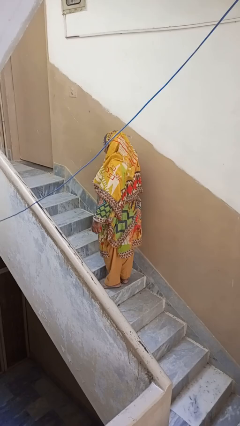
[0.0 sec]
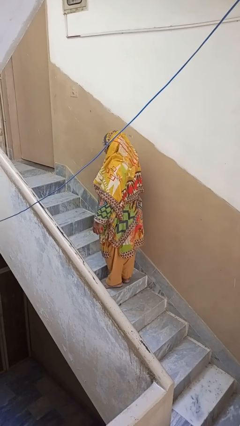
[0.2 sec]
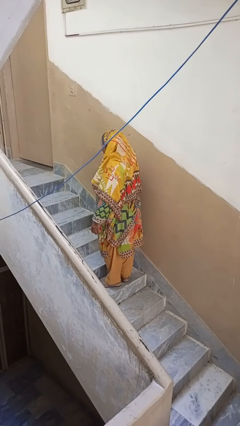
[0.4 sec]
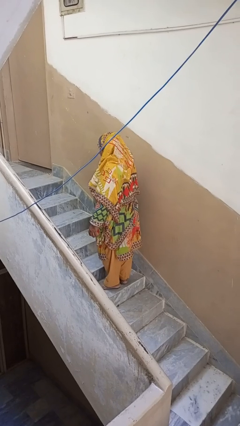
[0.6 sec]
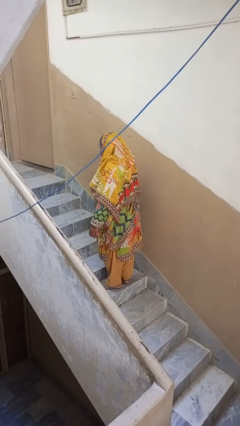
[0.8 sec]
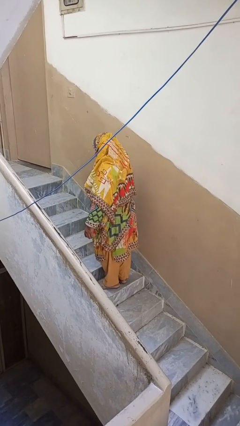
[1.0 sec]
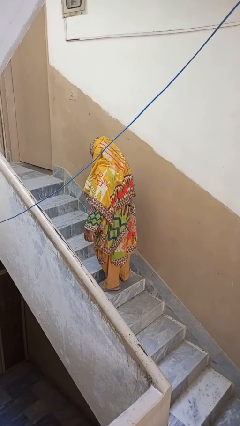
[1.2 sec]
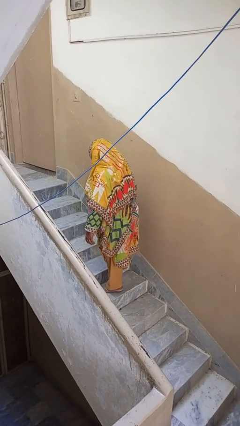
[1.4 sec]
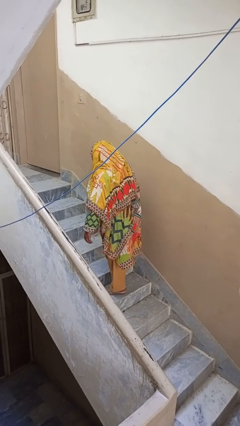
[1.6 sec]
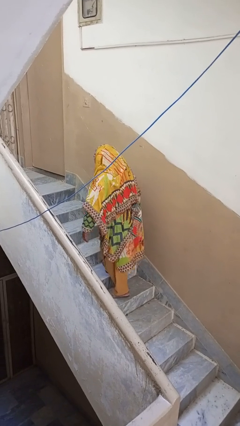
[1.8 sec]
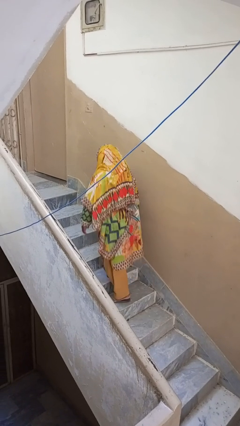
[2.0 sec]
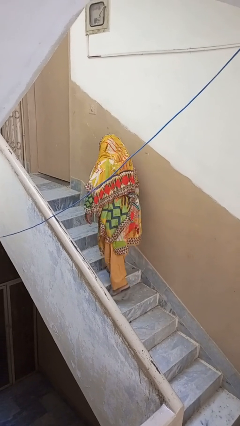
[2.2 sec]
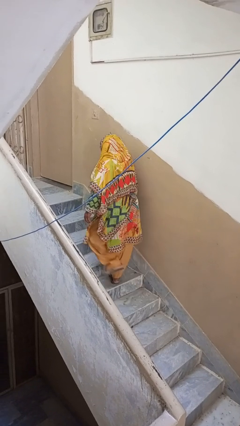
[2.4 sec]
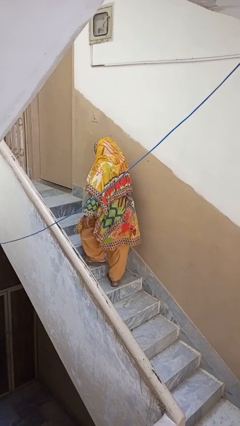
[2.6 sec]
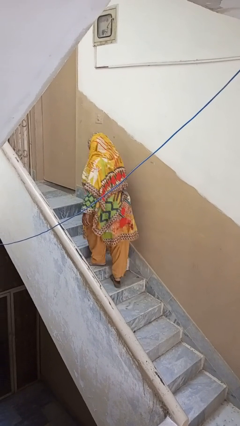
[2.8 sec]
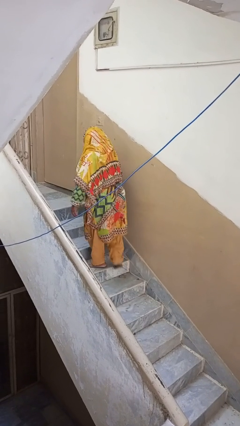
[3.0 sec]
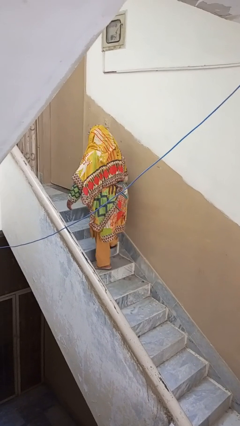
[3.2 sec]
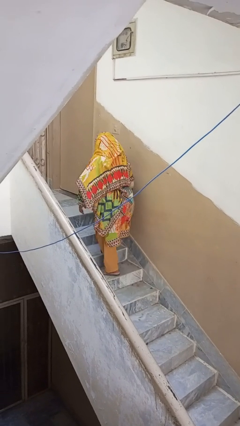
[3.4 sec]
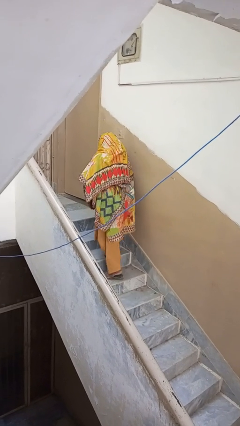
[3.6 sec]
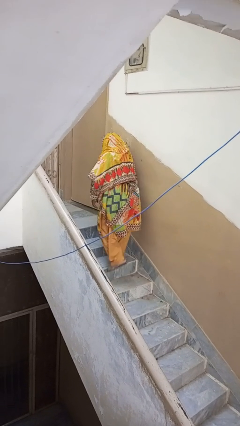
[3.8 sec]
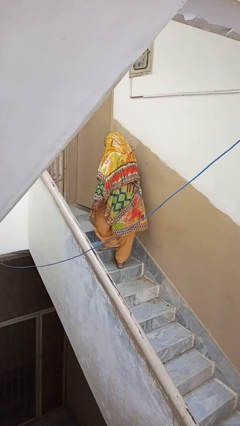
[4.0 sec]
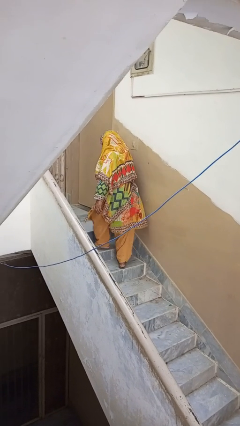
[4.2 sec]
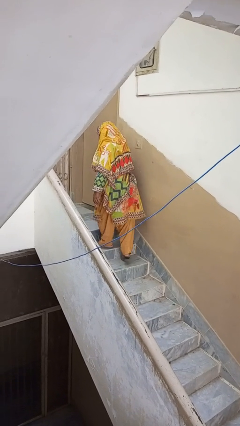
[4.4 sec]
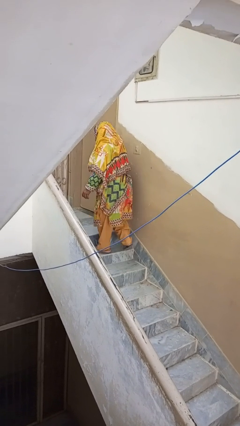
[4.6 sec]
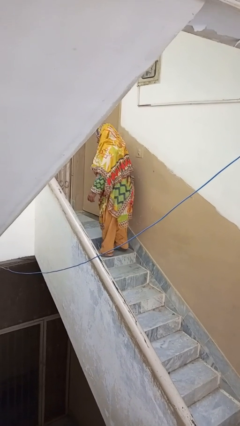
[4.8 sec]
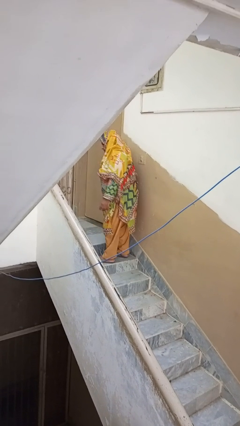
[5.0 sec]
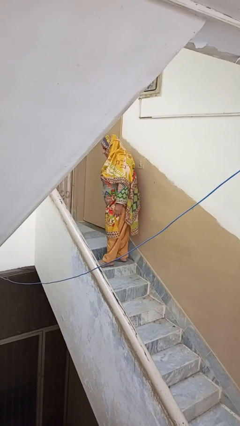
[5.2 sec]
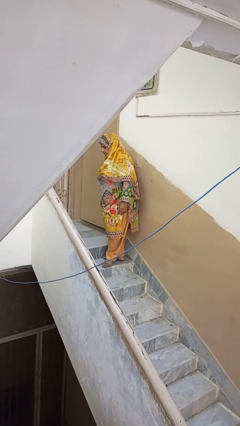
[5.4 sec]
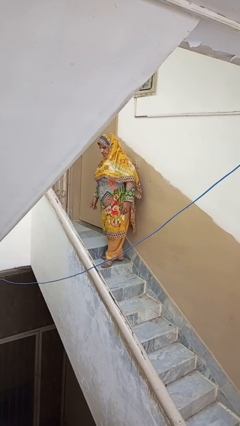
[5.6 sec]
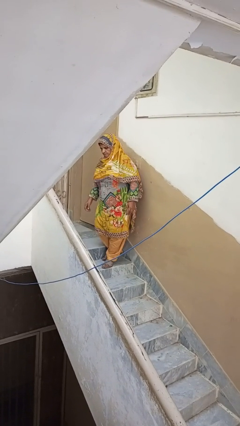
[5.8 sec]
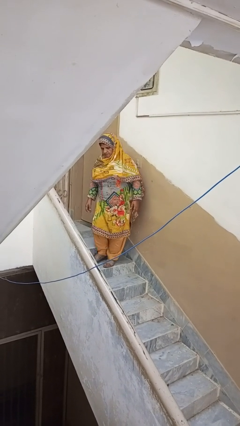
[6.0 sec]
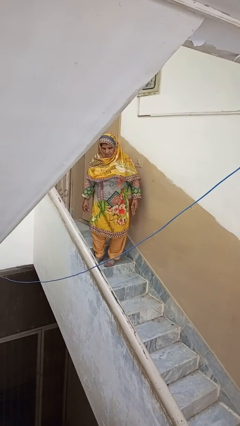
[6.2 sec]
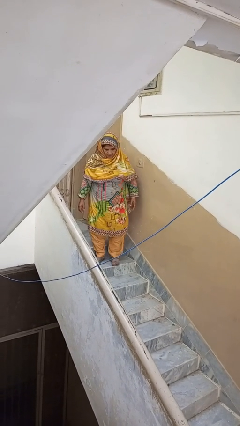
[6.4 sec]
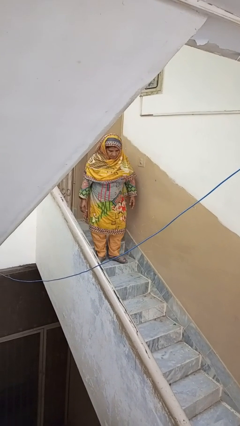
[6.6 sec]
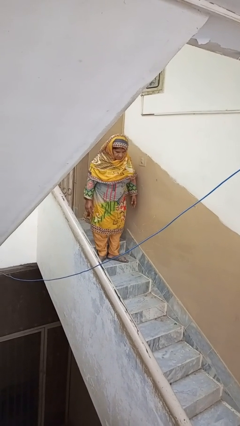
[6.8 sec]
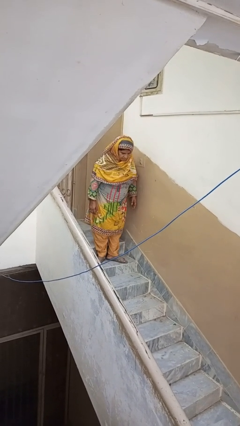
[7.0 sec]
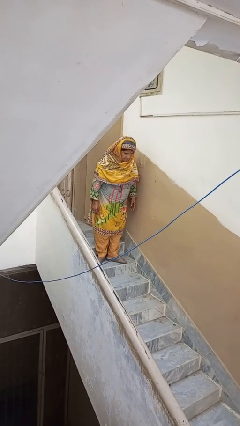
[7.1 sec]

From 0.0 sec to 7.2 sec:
person climbs up stairs

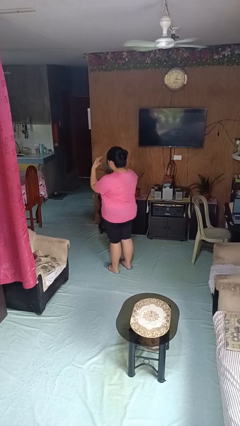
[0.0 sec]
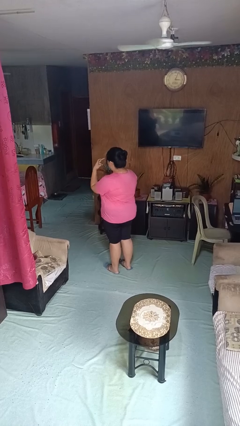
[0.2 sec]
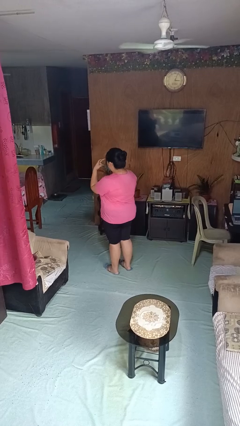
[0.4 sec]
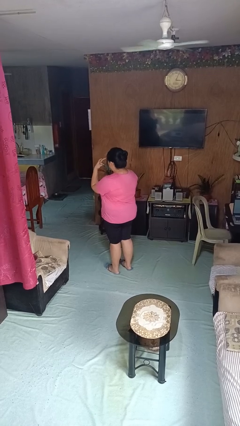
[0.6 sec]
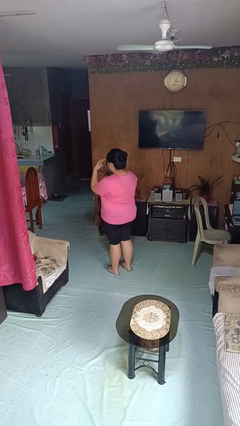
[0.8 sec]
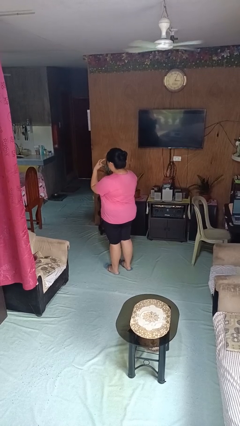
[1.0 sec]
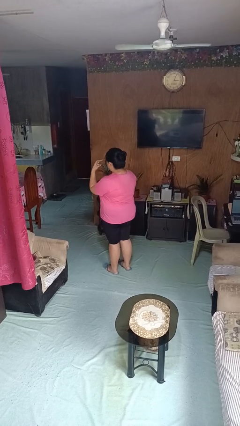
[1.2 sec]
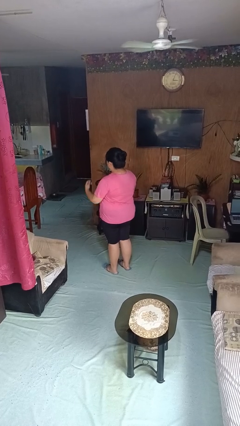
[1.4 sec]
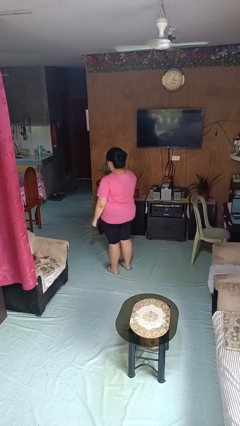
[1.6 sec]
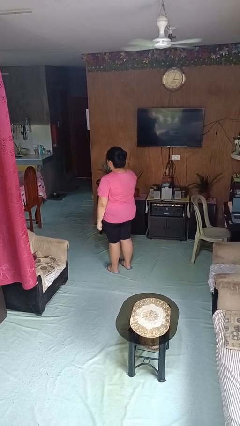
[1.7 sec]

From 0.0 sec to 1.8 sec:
person gestures watch closely

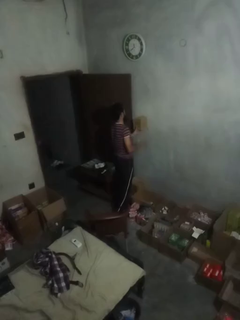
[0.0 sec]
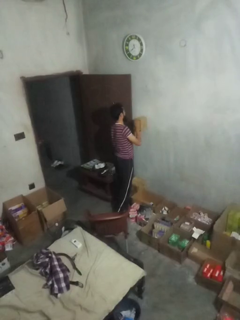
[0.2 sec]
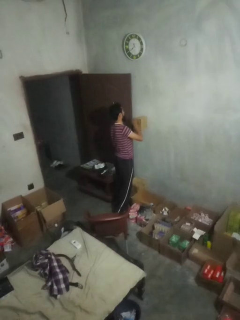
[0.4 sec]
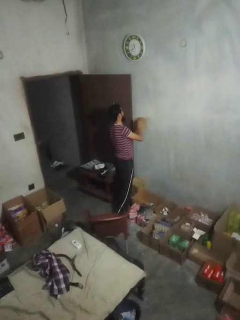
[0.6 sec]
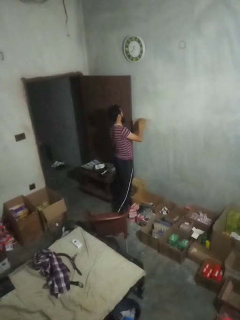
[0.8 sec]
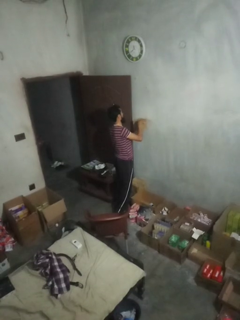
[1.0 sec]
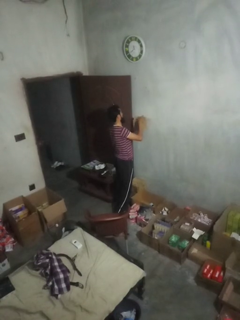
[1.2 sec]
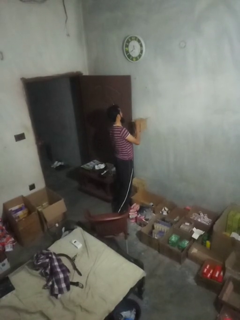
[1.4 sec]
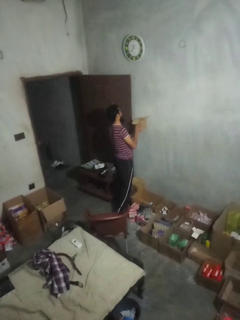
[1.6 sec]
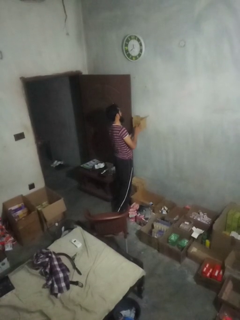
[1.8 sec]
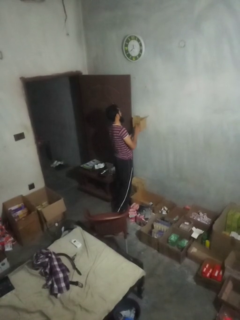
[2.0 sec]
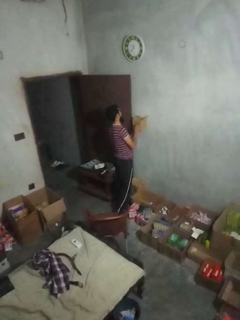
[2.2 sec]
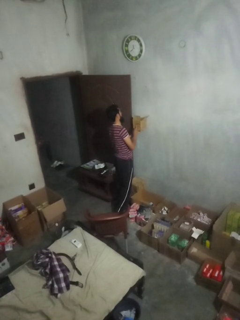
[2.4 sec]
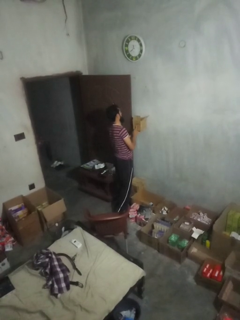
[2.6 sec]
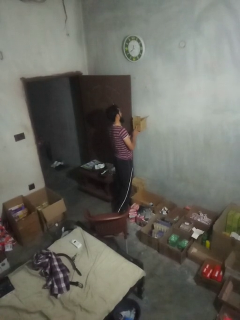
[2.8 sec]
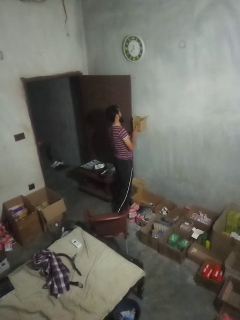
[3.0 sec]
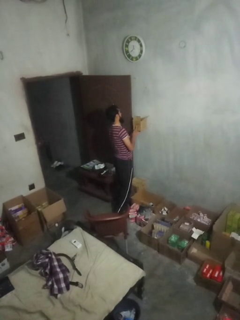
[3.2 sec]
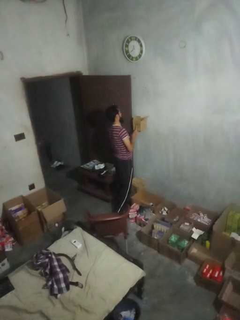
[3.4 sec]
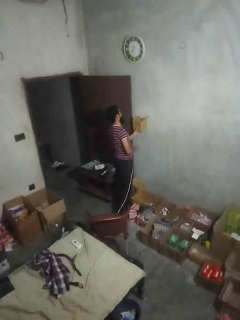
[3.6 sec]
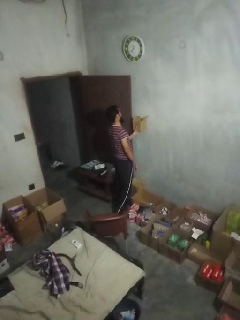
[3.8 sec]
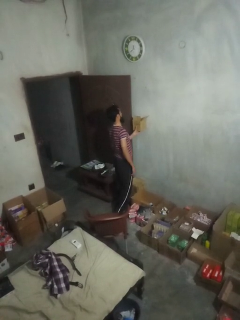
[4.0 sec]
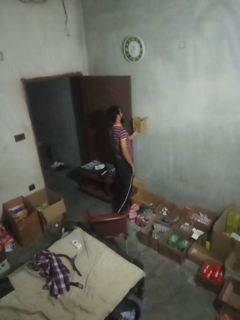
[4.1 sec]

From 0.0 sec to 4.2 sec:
person opens mailbox

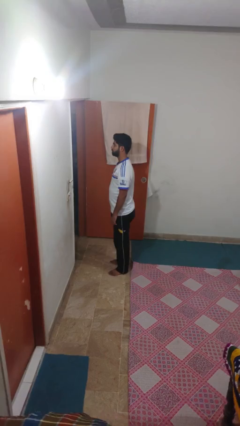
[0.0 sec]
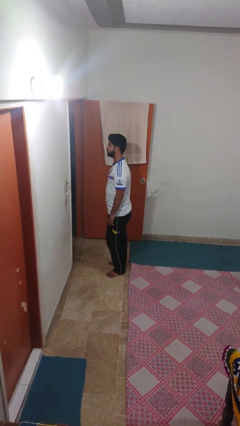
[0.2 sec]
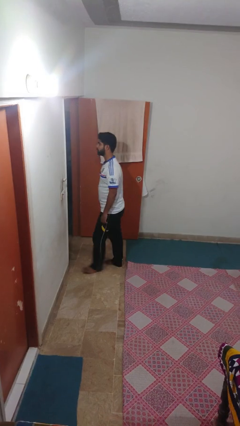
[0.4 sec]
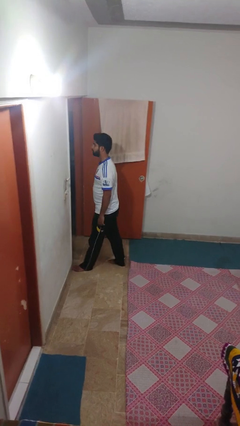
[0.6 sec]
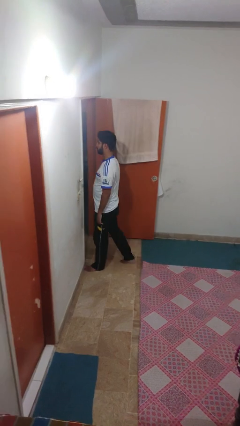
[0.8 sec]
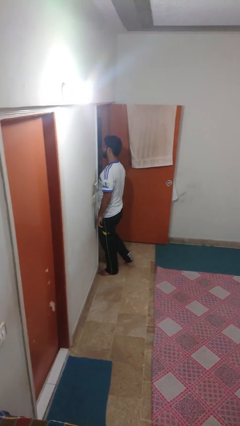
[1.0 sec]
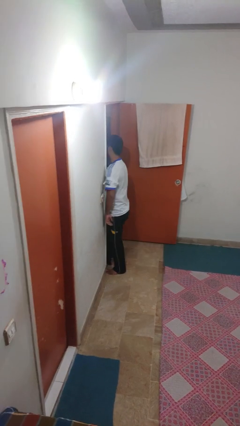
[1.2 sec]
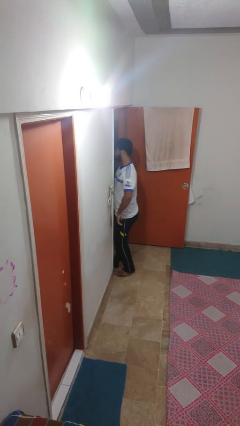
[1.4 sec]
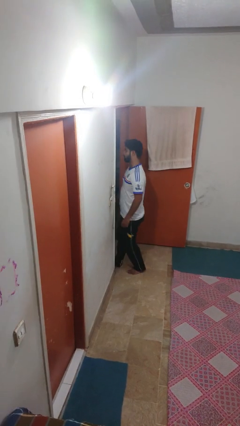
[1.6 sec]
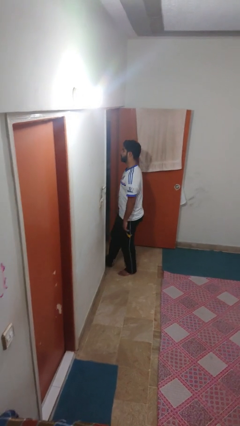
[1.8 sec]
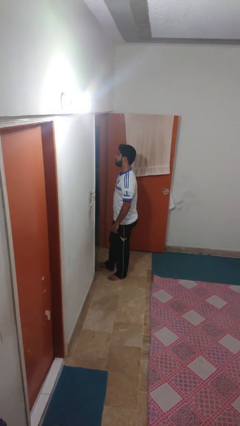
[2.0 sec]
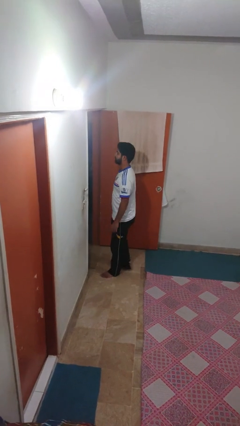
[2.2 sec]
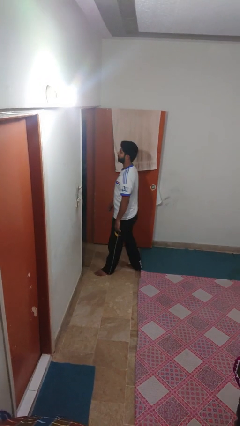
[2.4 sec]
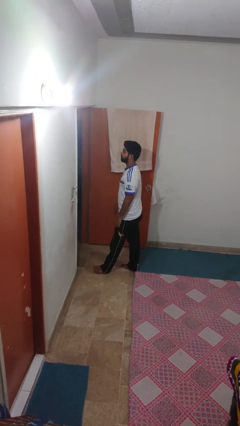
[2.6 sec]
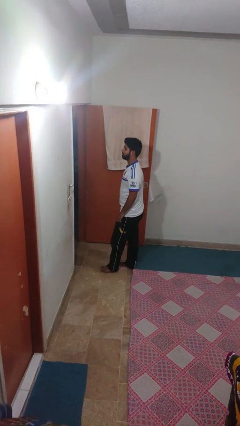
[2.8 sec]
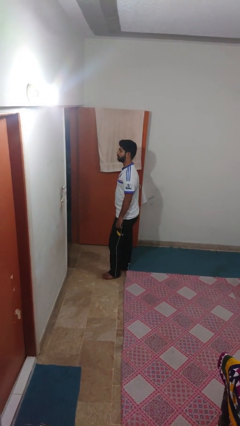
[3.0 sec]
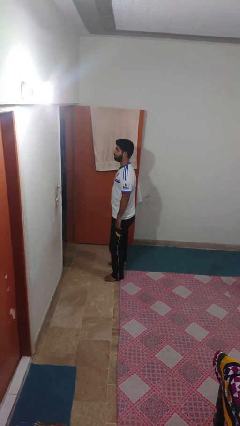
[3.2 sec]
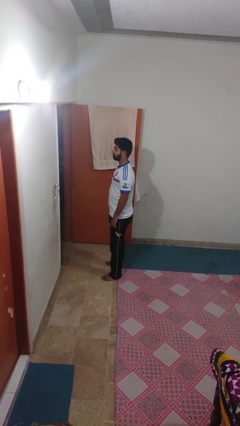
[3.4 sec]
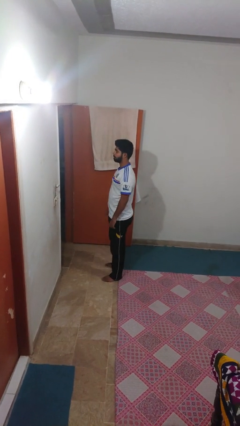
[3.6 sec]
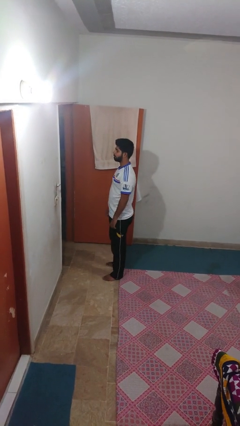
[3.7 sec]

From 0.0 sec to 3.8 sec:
person bumps into wall

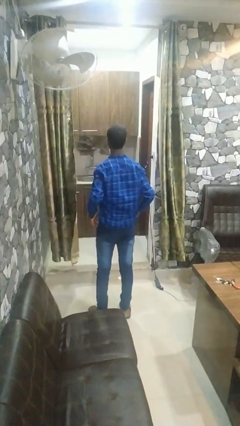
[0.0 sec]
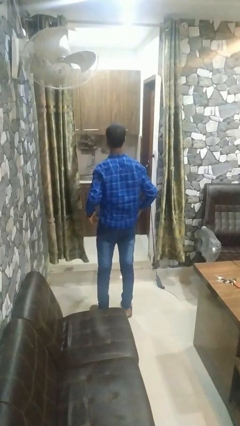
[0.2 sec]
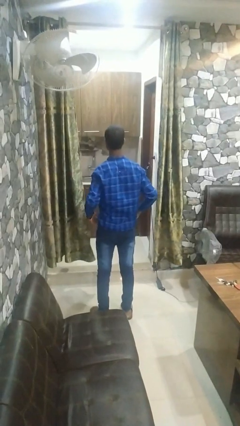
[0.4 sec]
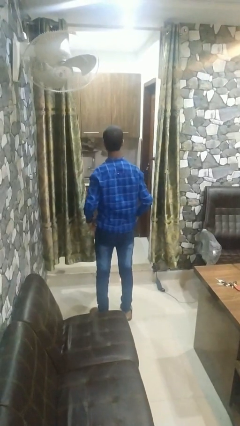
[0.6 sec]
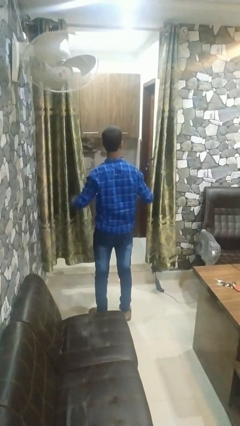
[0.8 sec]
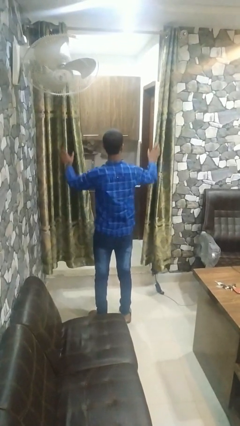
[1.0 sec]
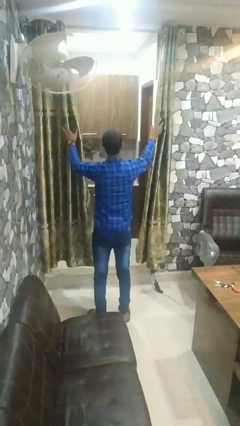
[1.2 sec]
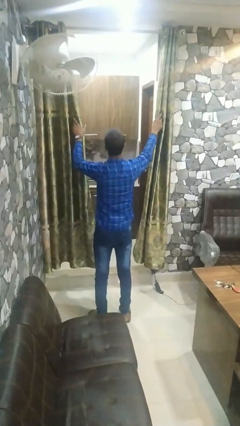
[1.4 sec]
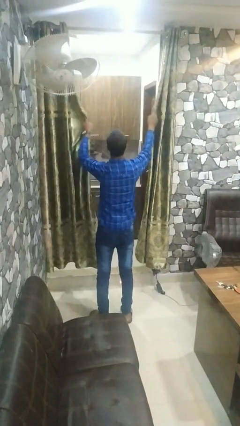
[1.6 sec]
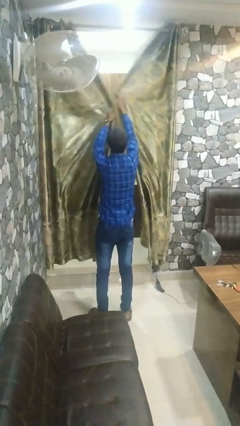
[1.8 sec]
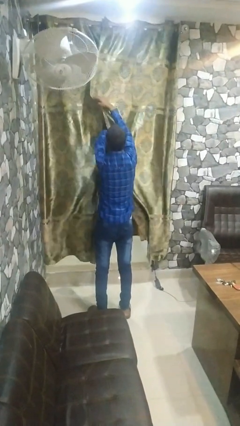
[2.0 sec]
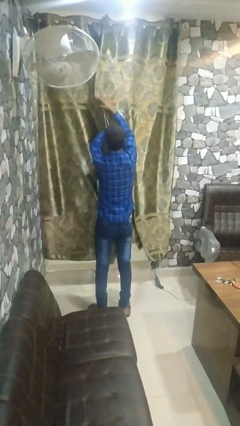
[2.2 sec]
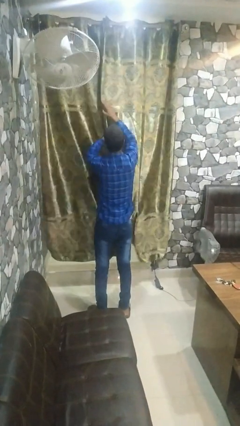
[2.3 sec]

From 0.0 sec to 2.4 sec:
person closes curtains
